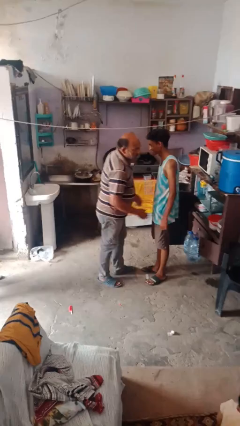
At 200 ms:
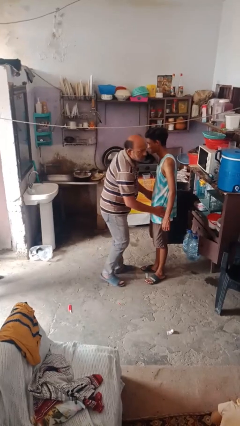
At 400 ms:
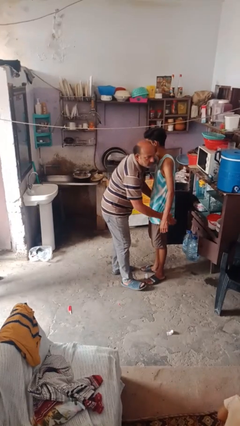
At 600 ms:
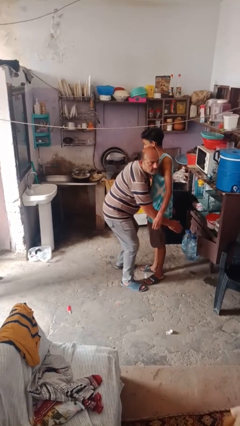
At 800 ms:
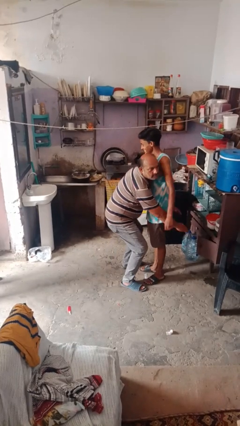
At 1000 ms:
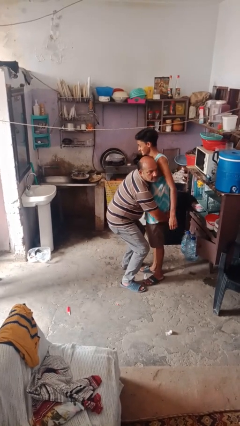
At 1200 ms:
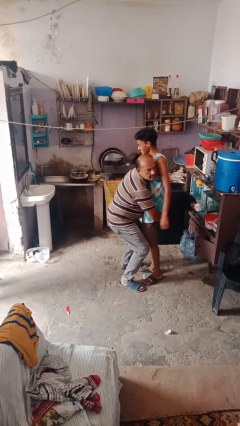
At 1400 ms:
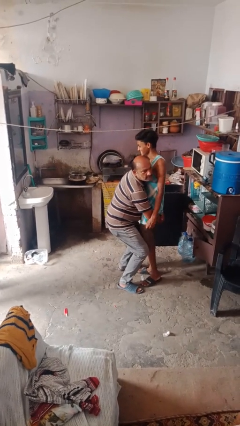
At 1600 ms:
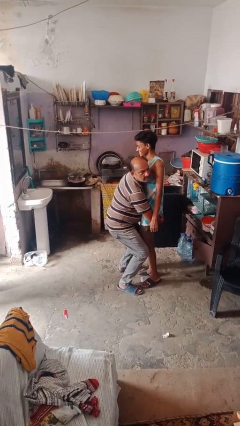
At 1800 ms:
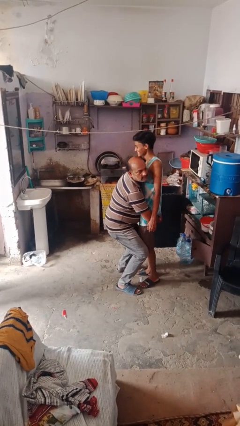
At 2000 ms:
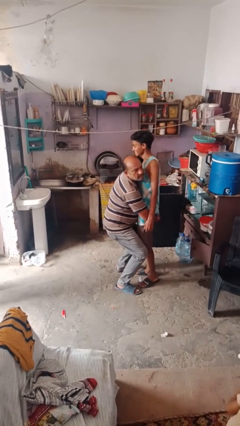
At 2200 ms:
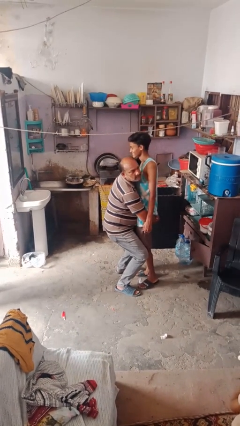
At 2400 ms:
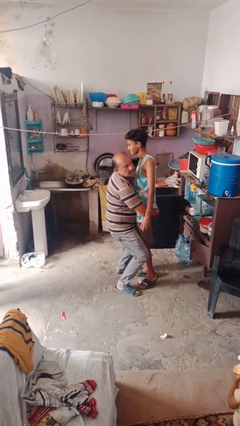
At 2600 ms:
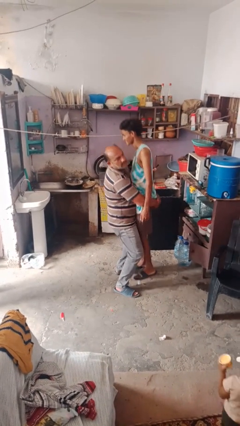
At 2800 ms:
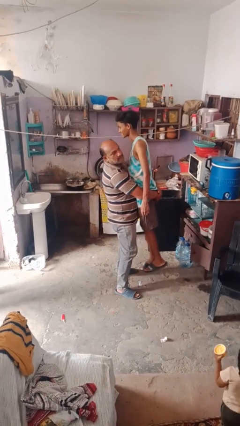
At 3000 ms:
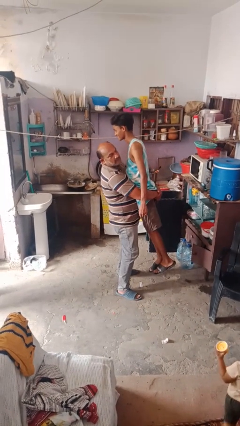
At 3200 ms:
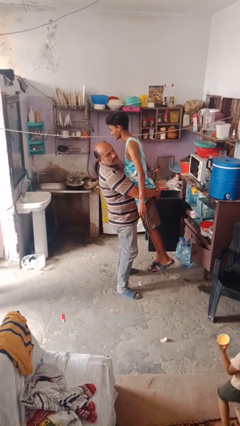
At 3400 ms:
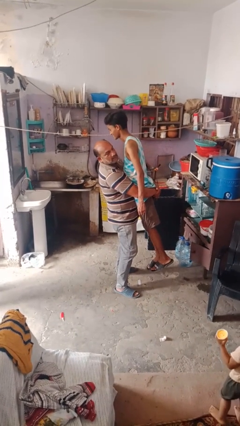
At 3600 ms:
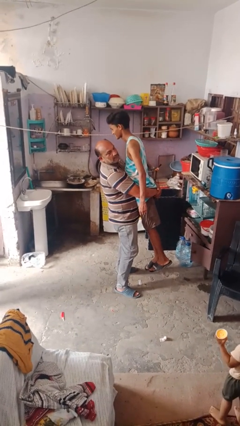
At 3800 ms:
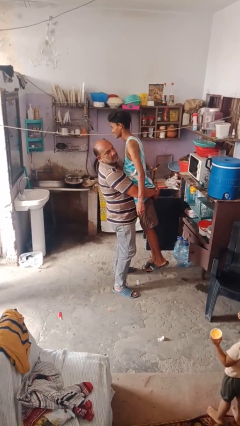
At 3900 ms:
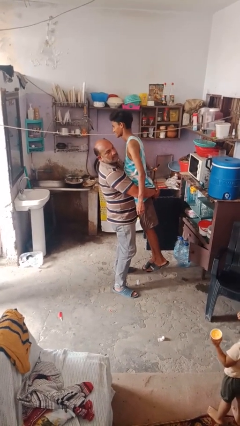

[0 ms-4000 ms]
person picks up person

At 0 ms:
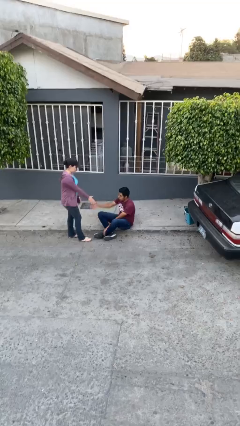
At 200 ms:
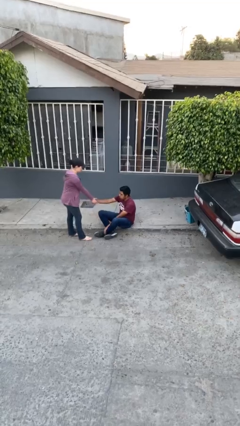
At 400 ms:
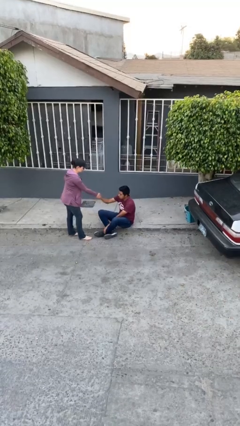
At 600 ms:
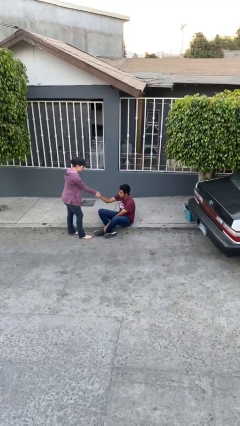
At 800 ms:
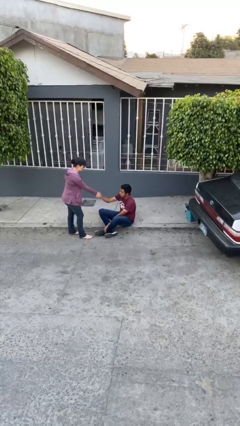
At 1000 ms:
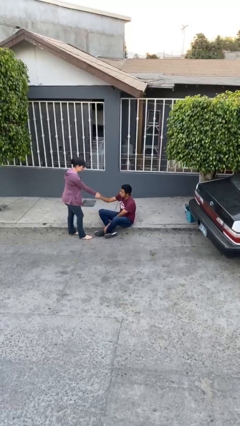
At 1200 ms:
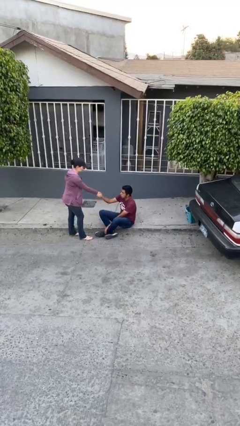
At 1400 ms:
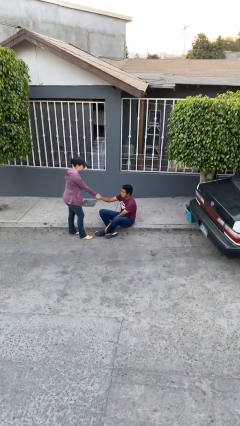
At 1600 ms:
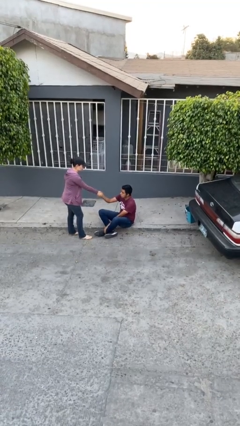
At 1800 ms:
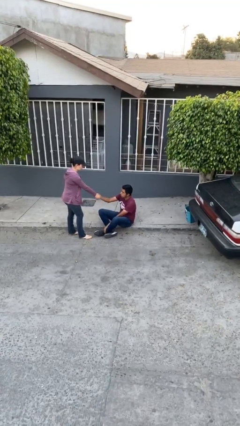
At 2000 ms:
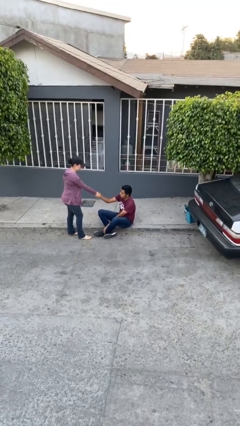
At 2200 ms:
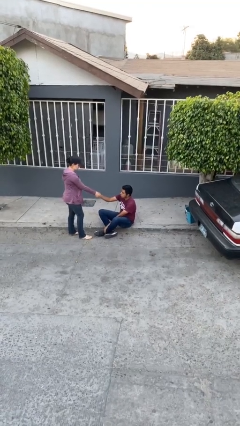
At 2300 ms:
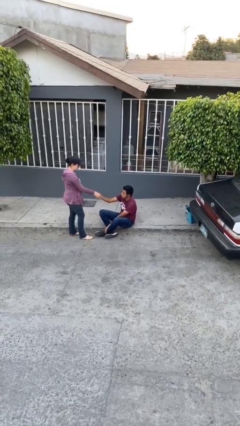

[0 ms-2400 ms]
person shakes hand

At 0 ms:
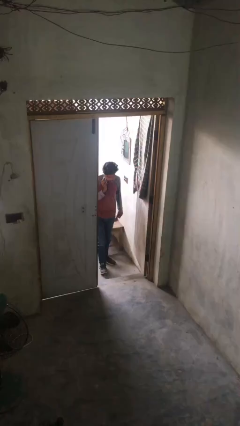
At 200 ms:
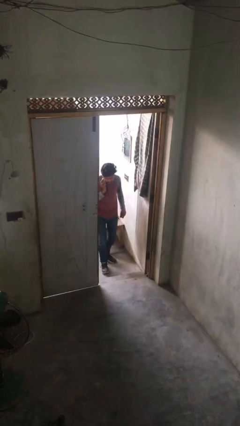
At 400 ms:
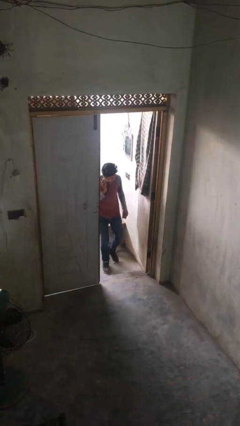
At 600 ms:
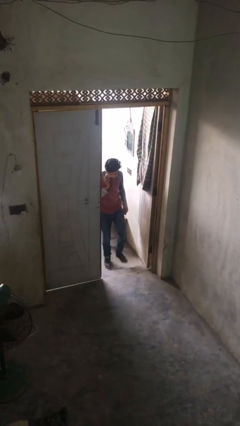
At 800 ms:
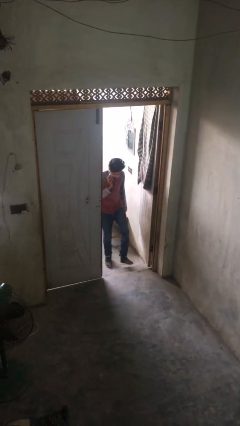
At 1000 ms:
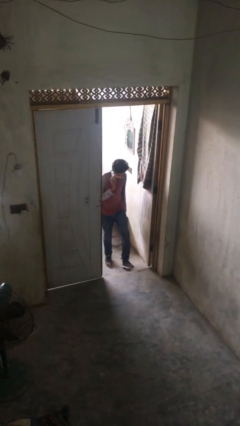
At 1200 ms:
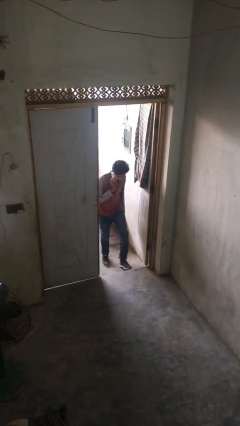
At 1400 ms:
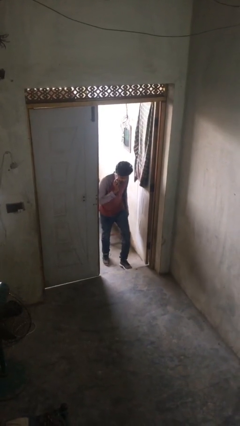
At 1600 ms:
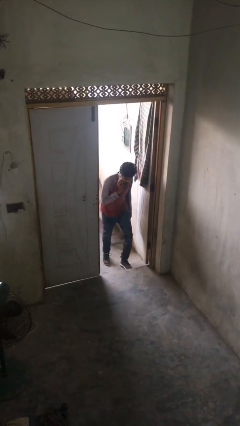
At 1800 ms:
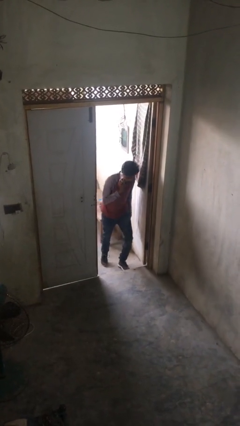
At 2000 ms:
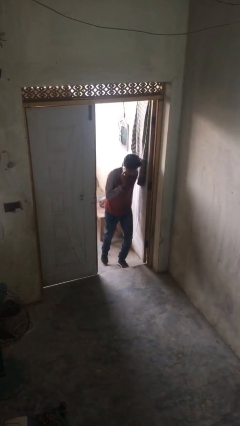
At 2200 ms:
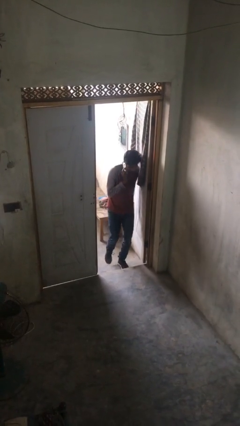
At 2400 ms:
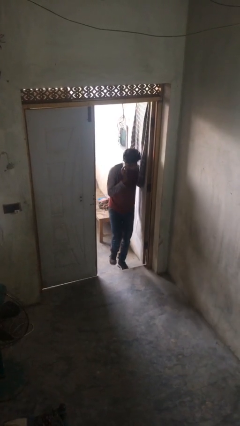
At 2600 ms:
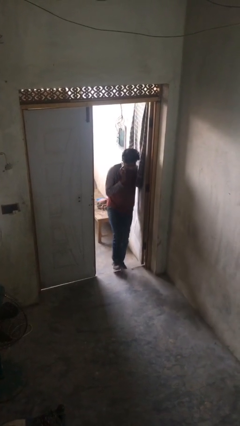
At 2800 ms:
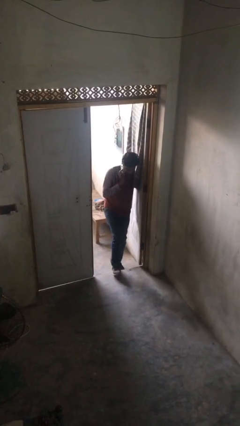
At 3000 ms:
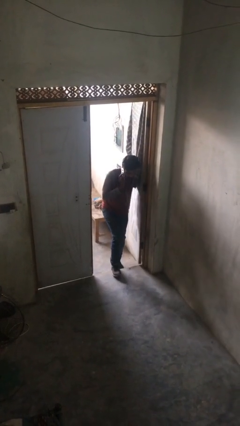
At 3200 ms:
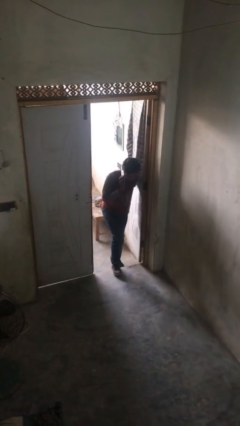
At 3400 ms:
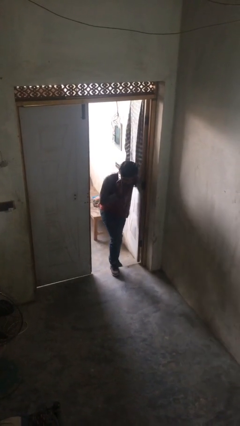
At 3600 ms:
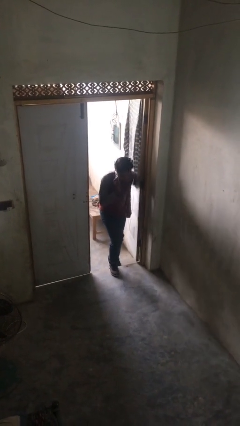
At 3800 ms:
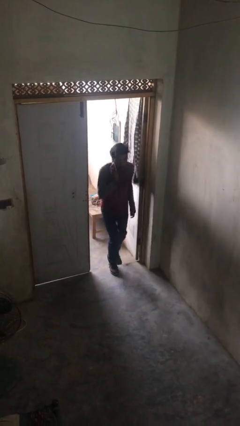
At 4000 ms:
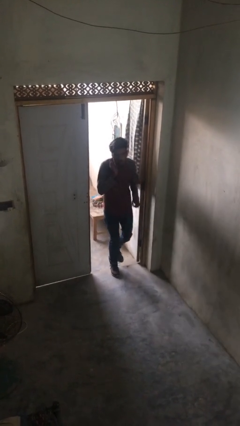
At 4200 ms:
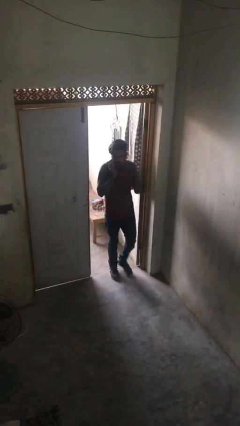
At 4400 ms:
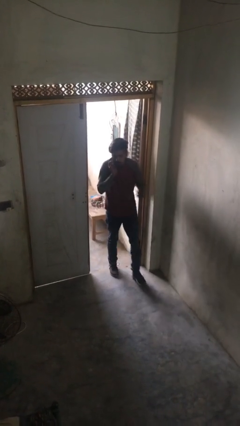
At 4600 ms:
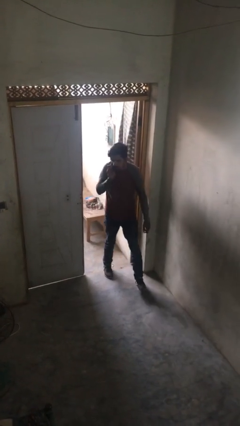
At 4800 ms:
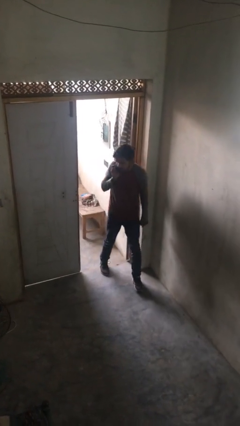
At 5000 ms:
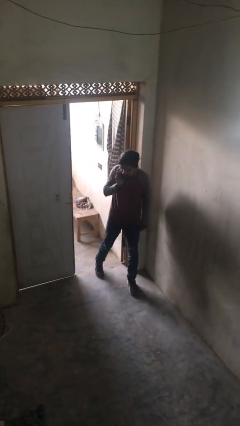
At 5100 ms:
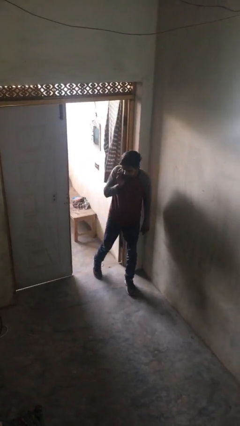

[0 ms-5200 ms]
person enters scene through structure

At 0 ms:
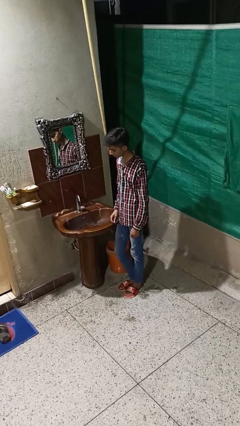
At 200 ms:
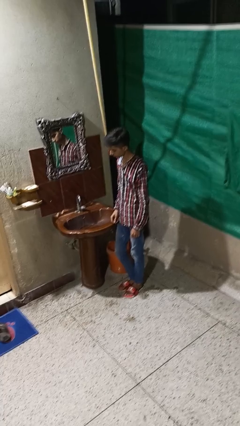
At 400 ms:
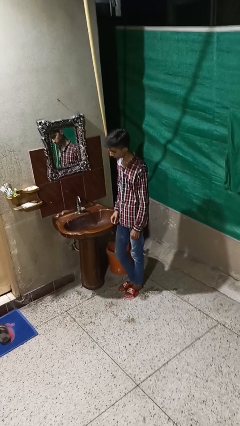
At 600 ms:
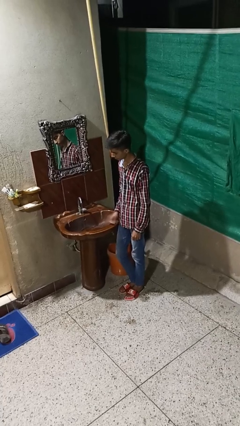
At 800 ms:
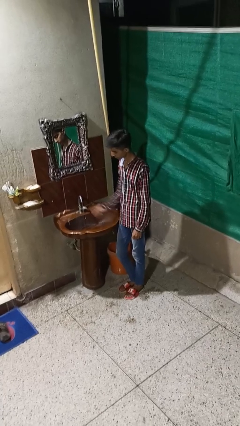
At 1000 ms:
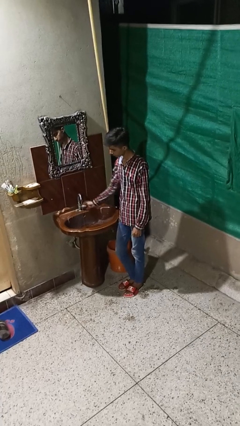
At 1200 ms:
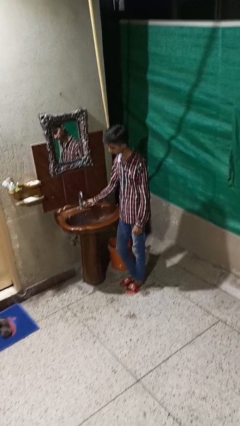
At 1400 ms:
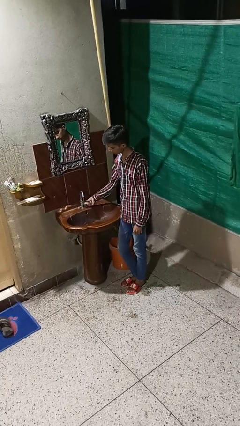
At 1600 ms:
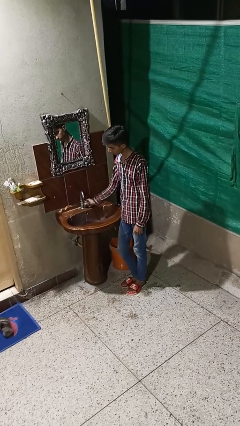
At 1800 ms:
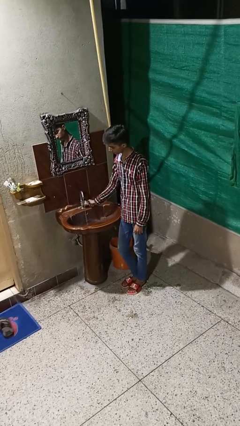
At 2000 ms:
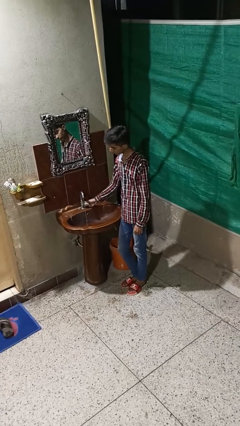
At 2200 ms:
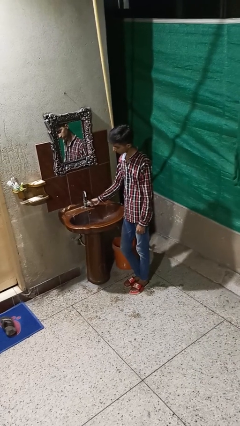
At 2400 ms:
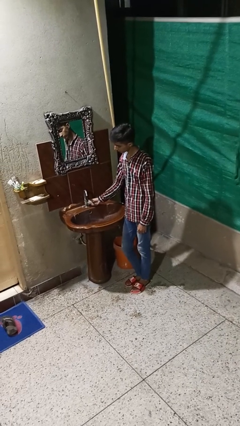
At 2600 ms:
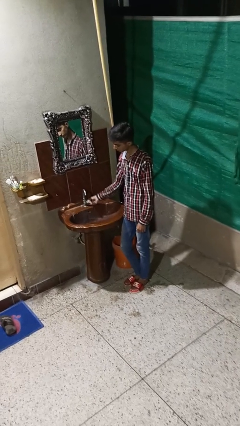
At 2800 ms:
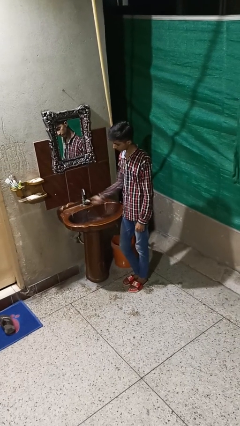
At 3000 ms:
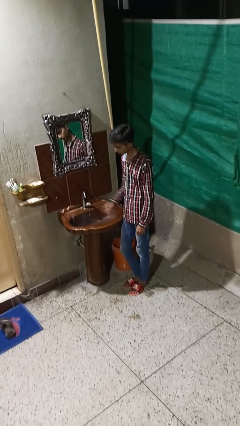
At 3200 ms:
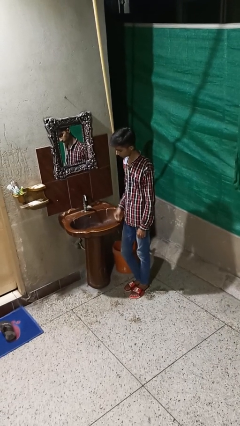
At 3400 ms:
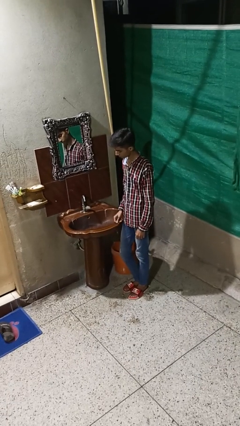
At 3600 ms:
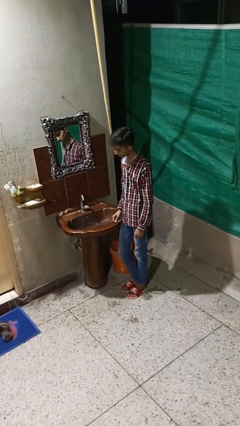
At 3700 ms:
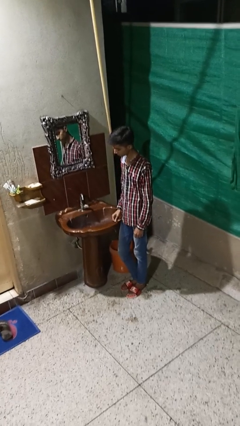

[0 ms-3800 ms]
person turns off faucet

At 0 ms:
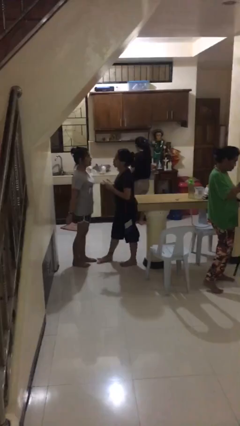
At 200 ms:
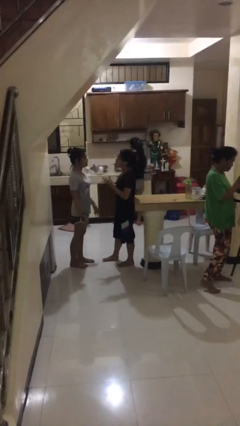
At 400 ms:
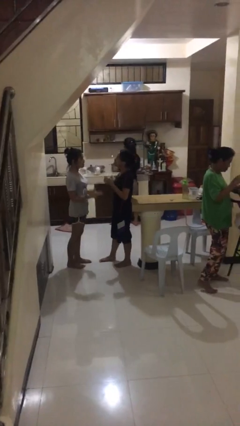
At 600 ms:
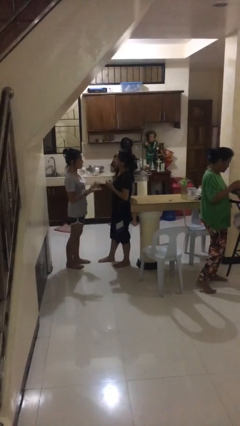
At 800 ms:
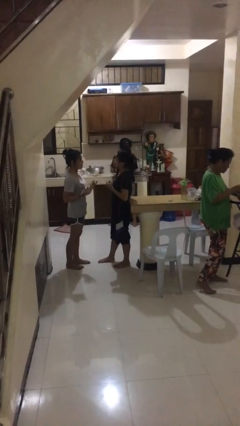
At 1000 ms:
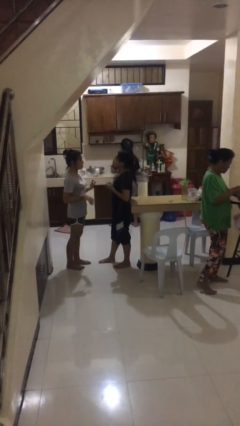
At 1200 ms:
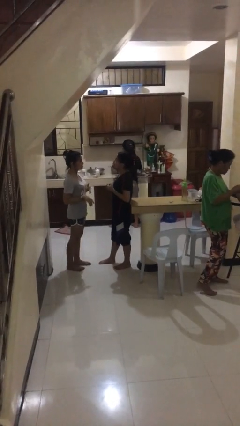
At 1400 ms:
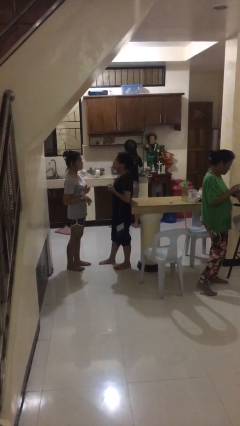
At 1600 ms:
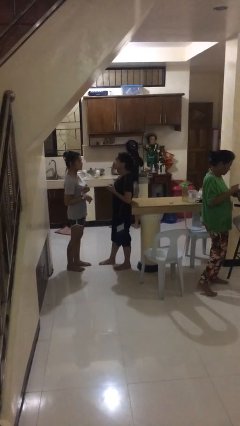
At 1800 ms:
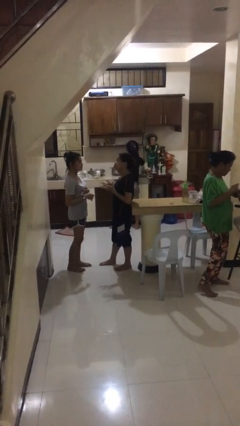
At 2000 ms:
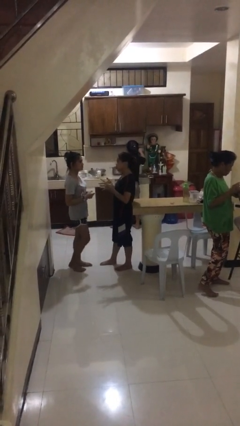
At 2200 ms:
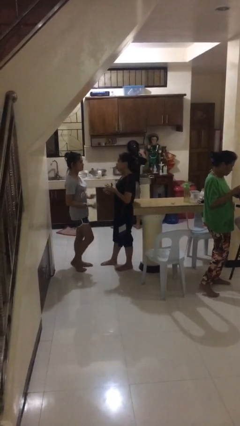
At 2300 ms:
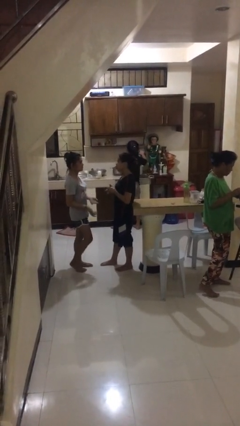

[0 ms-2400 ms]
person talks to person
